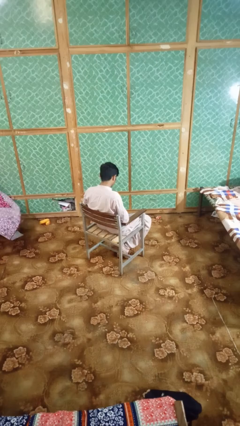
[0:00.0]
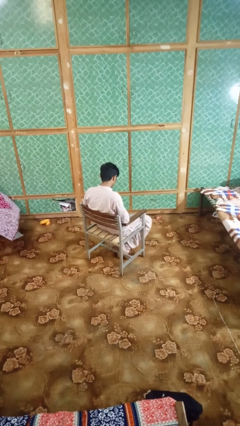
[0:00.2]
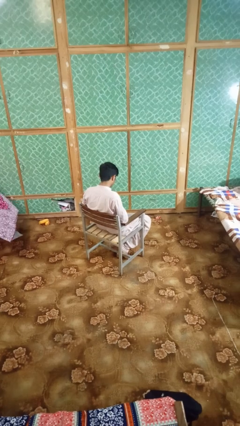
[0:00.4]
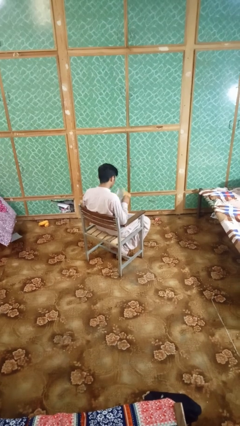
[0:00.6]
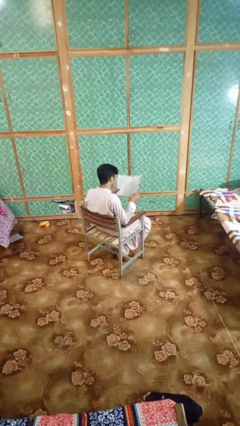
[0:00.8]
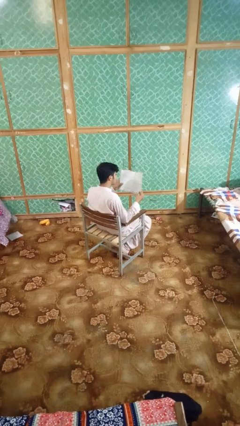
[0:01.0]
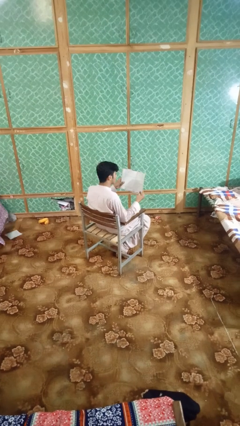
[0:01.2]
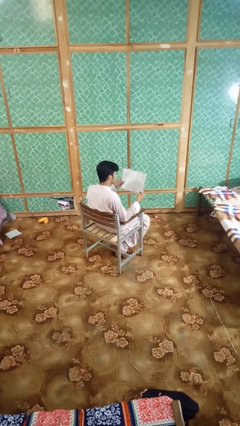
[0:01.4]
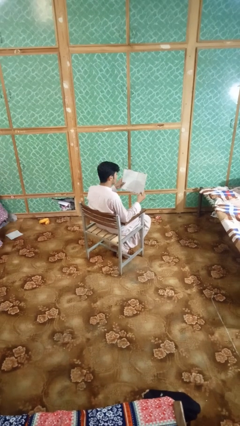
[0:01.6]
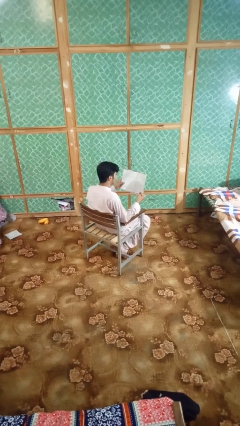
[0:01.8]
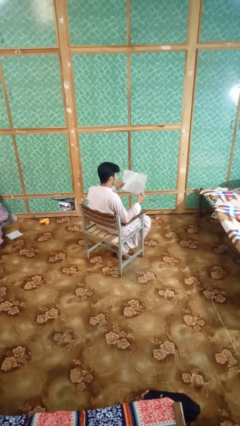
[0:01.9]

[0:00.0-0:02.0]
person reads book

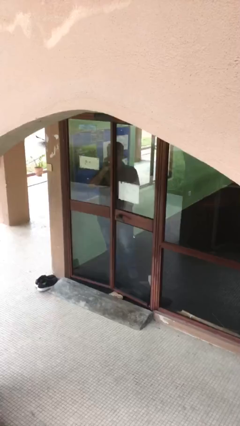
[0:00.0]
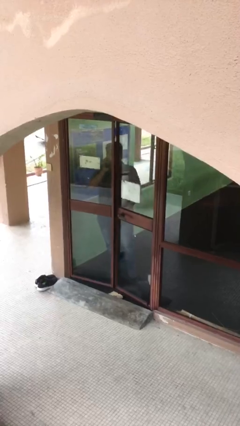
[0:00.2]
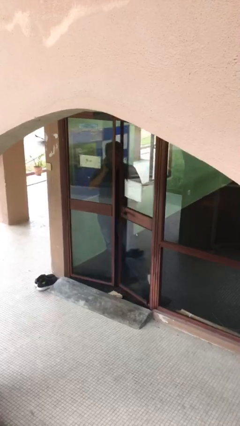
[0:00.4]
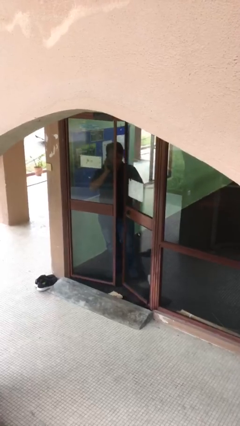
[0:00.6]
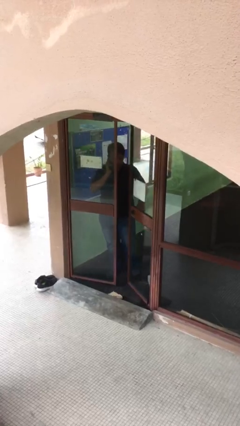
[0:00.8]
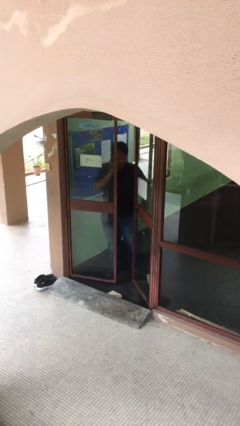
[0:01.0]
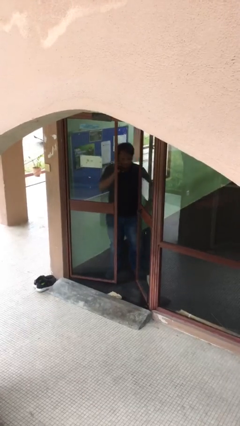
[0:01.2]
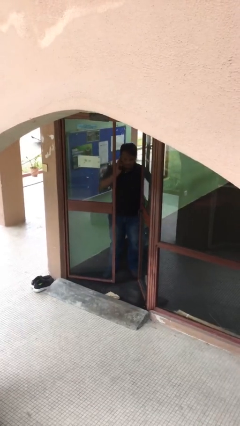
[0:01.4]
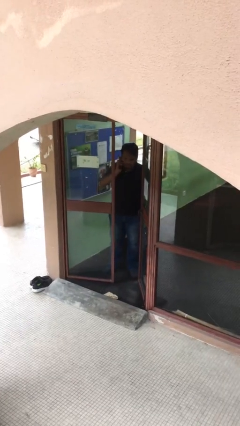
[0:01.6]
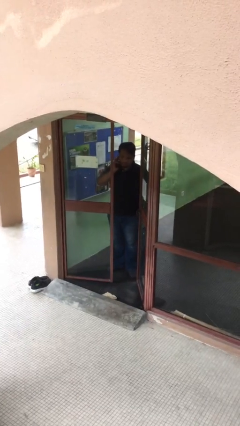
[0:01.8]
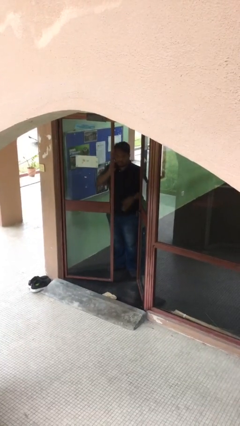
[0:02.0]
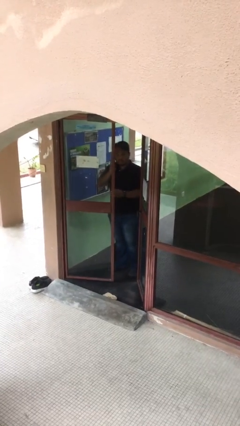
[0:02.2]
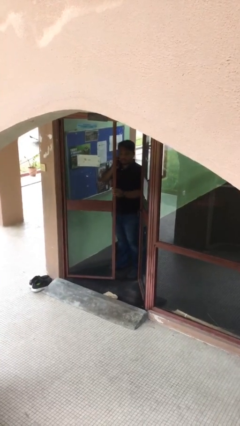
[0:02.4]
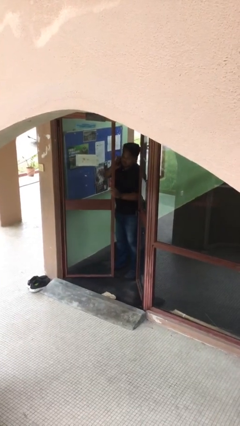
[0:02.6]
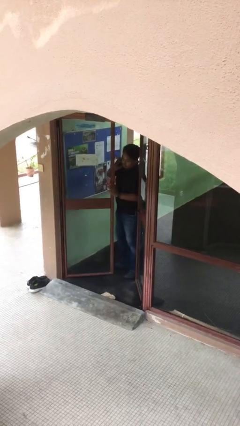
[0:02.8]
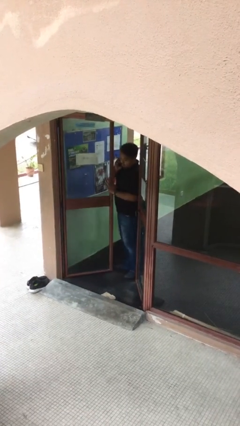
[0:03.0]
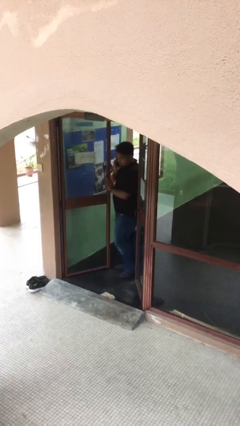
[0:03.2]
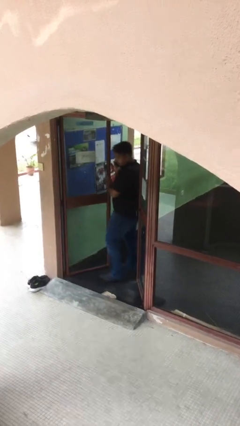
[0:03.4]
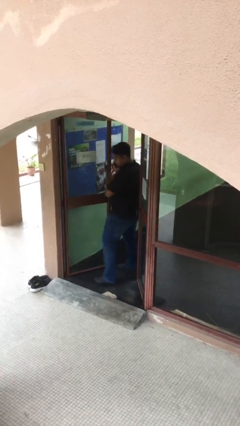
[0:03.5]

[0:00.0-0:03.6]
person opens facility door

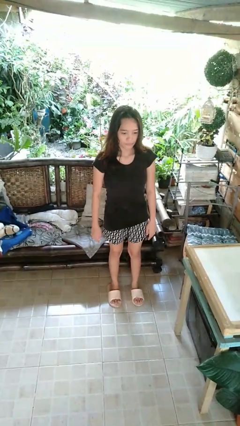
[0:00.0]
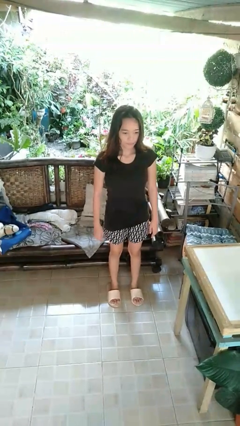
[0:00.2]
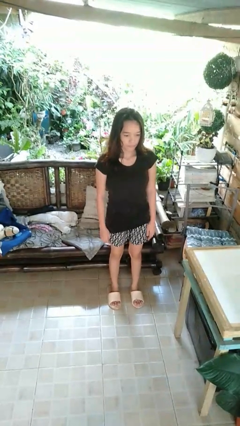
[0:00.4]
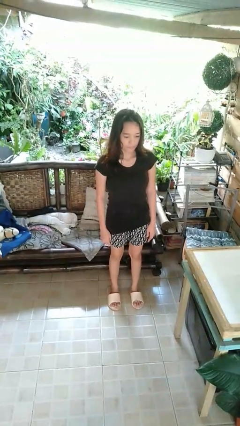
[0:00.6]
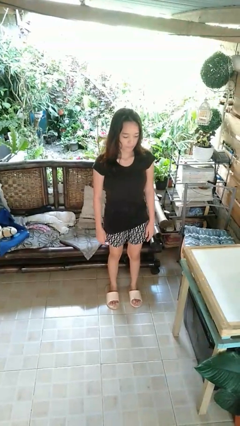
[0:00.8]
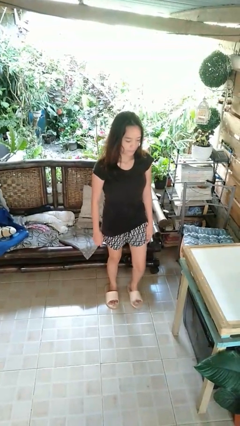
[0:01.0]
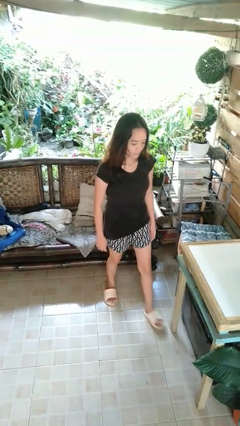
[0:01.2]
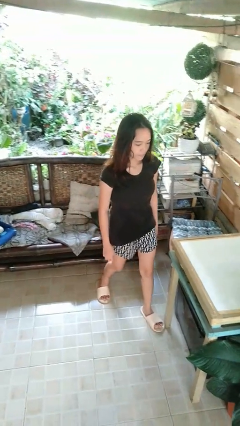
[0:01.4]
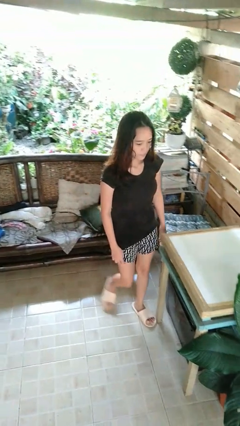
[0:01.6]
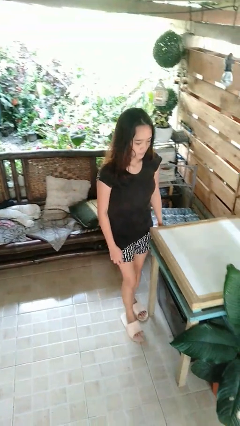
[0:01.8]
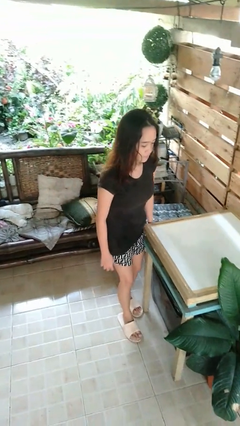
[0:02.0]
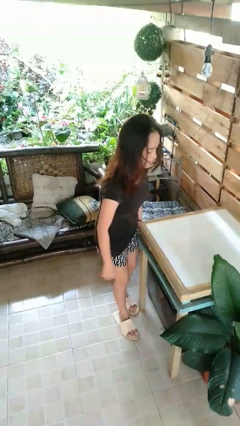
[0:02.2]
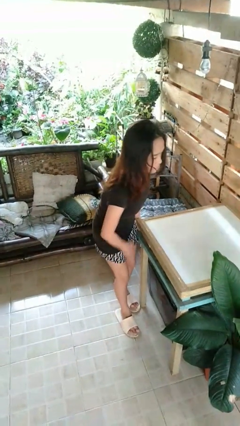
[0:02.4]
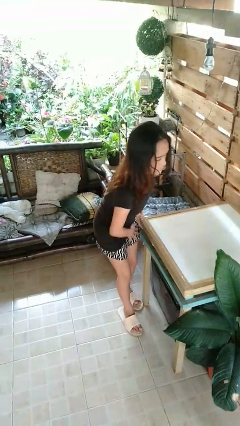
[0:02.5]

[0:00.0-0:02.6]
person bumps into table

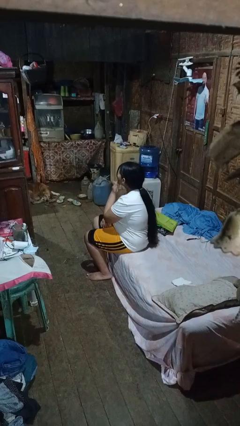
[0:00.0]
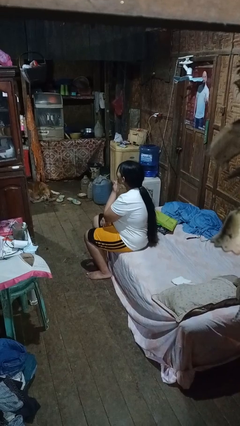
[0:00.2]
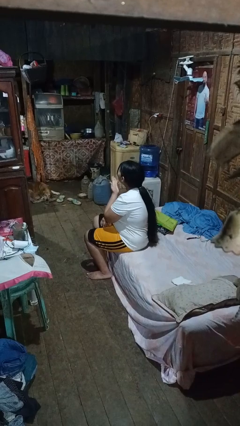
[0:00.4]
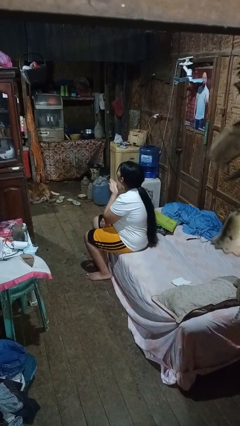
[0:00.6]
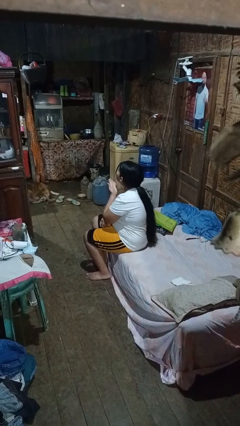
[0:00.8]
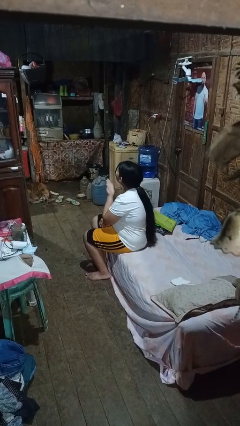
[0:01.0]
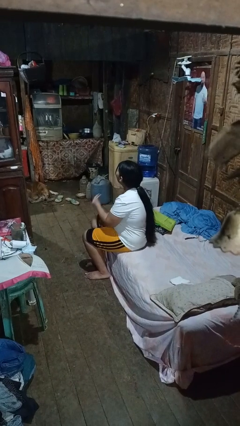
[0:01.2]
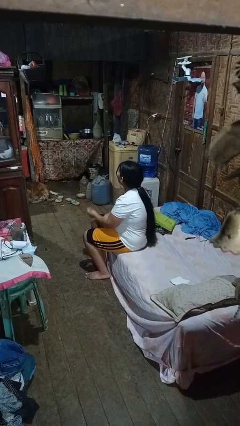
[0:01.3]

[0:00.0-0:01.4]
person gestures blow kiss

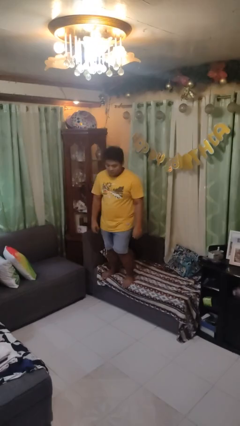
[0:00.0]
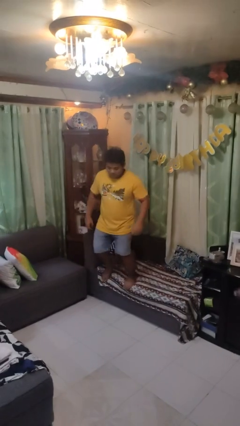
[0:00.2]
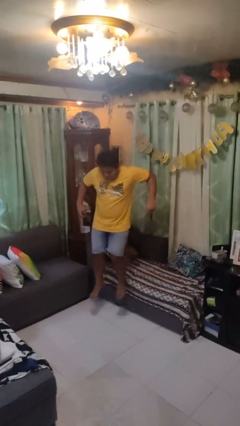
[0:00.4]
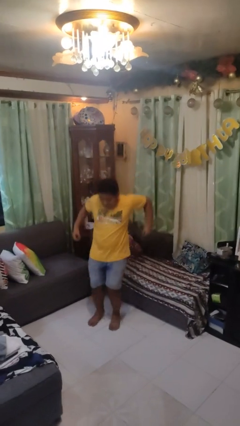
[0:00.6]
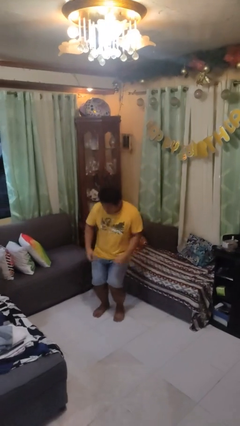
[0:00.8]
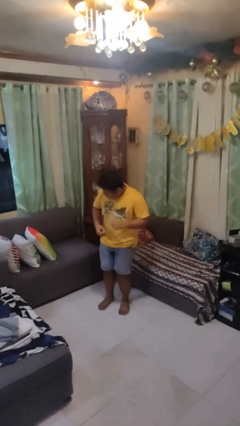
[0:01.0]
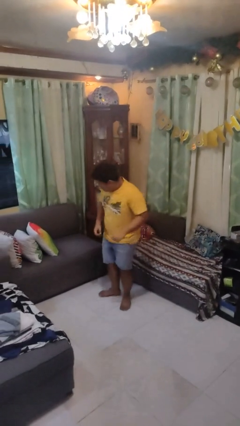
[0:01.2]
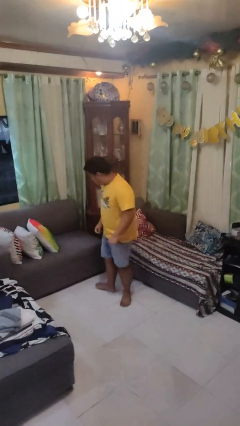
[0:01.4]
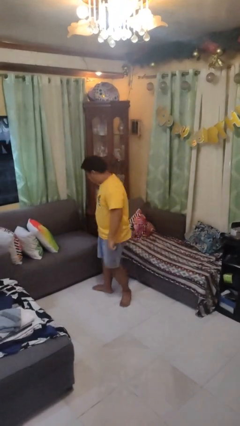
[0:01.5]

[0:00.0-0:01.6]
person jumps on couch

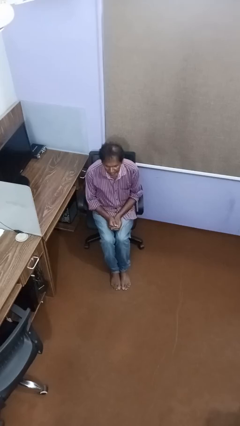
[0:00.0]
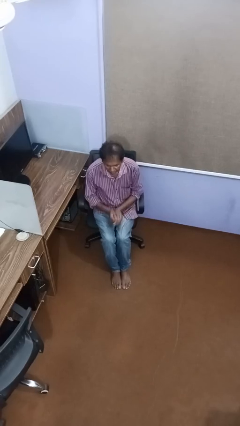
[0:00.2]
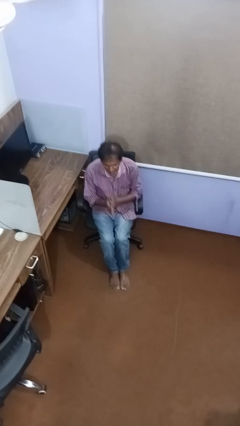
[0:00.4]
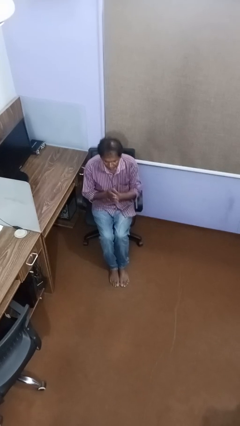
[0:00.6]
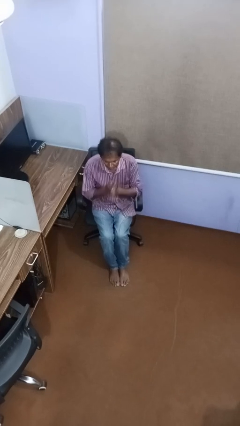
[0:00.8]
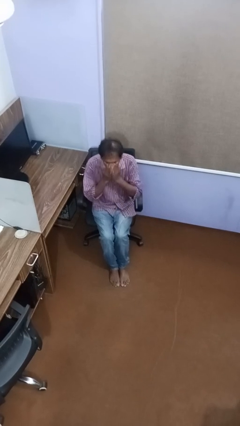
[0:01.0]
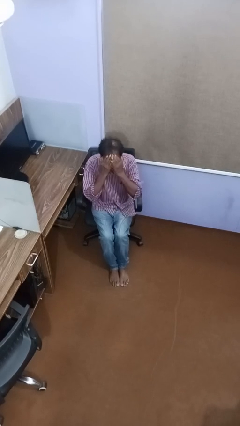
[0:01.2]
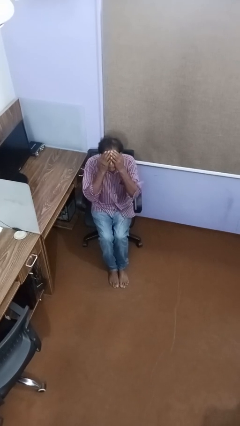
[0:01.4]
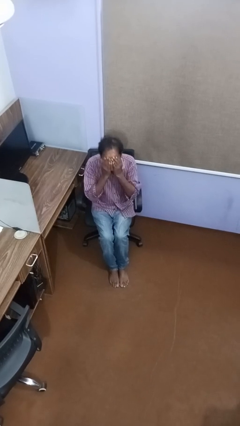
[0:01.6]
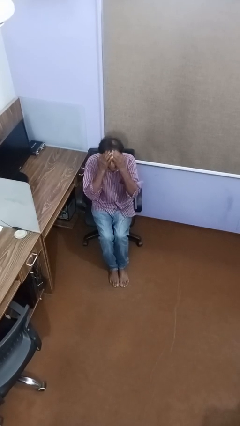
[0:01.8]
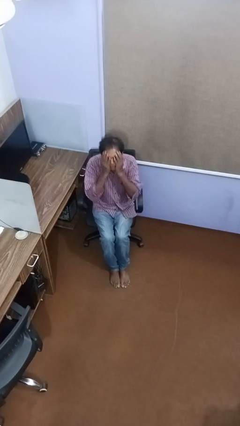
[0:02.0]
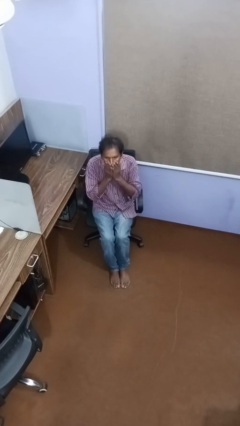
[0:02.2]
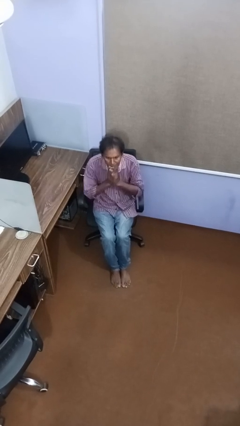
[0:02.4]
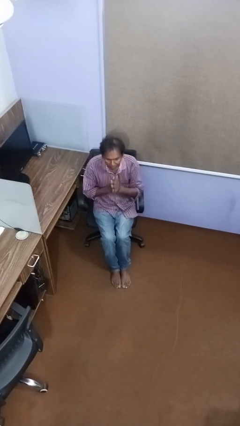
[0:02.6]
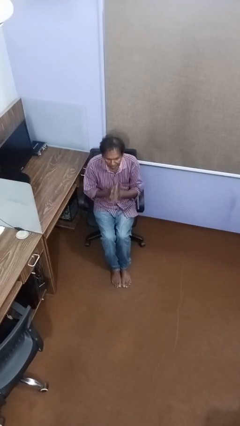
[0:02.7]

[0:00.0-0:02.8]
person applies foundation makeup

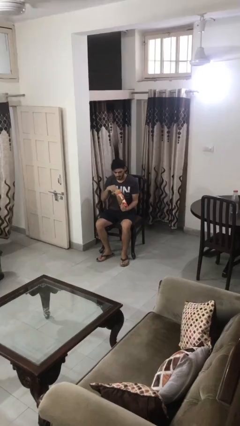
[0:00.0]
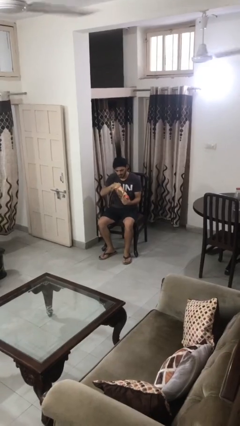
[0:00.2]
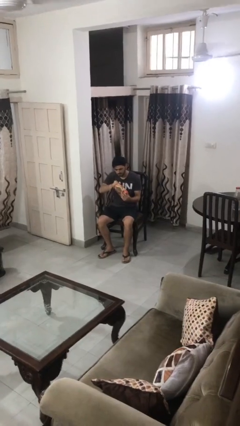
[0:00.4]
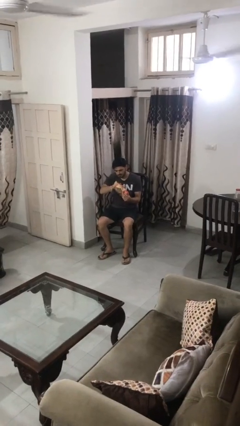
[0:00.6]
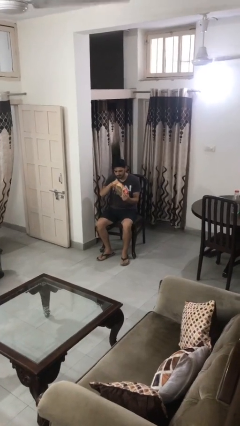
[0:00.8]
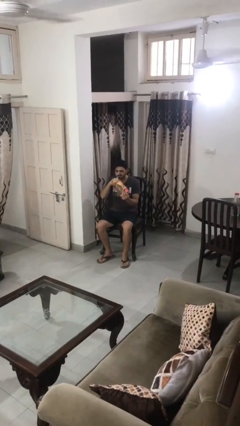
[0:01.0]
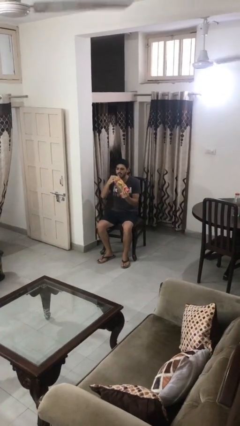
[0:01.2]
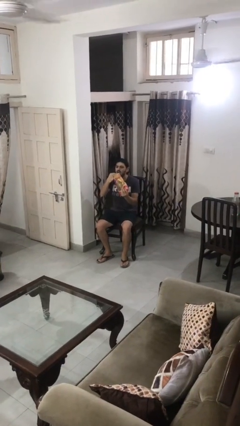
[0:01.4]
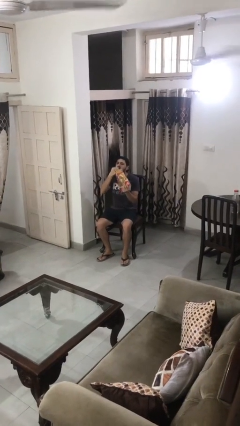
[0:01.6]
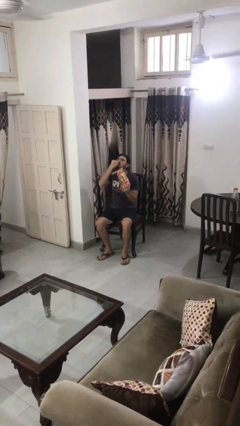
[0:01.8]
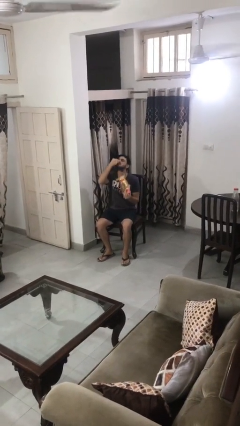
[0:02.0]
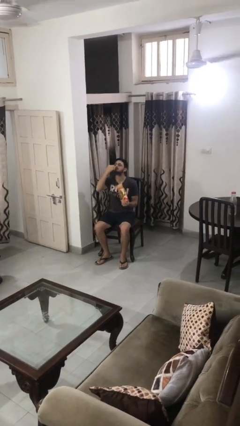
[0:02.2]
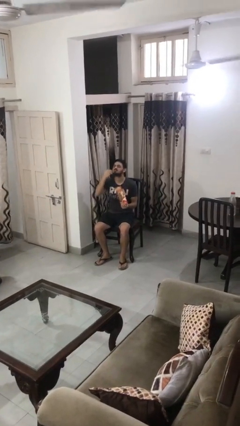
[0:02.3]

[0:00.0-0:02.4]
person eats snack from bag

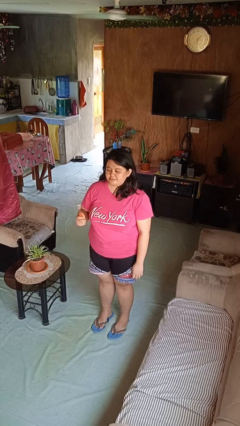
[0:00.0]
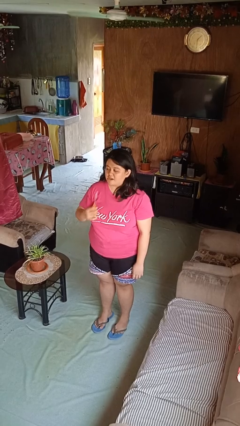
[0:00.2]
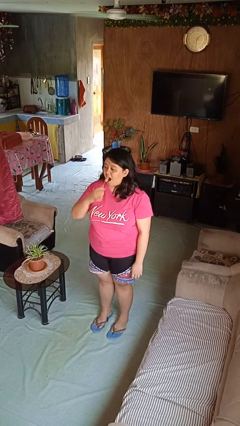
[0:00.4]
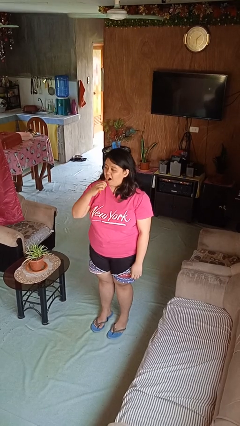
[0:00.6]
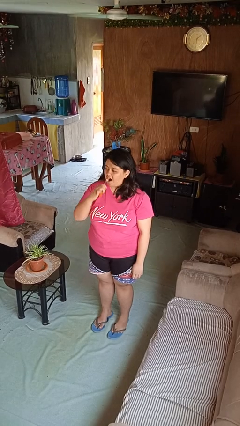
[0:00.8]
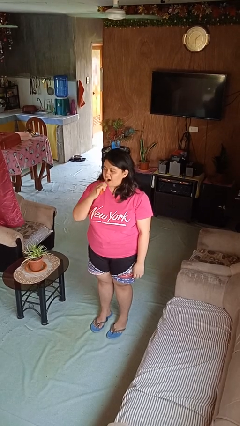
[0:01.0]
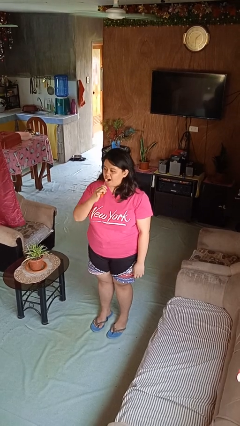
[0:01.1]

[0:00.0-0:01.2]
person brushes teeth
